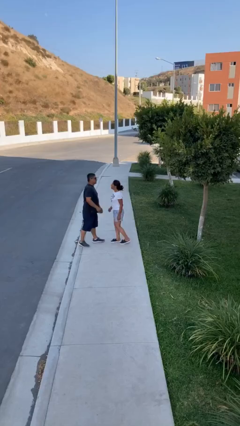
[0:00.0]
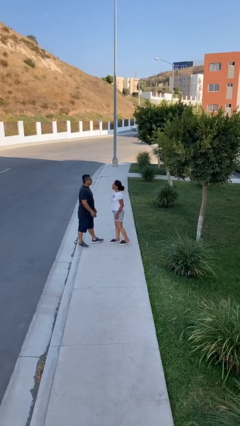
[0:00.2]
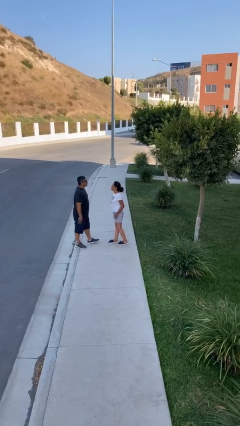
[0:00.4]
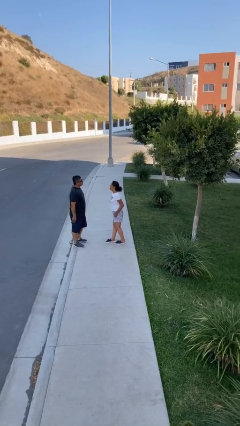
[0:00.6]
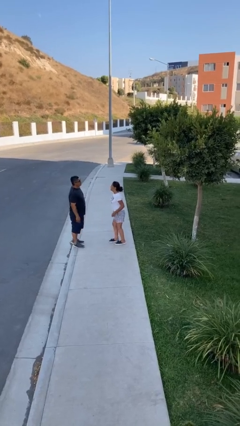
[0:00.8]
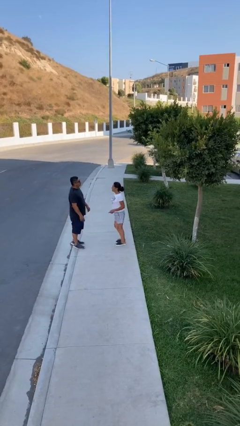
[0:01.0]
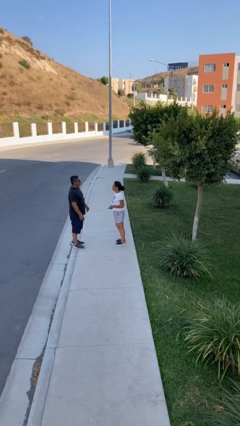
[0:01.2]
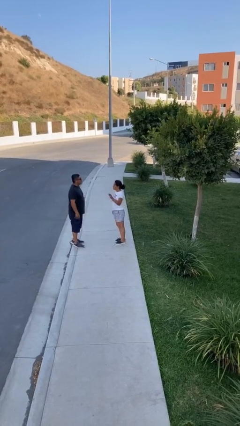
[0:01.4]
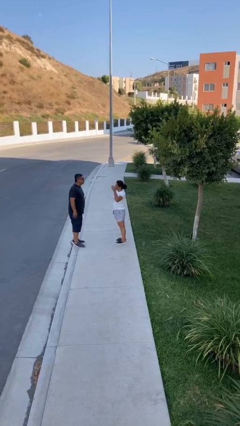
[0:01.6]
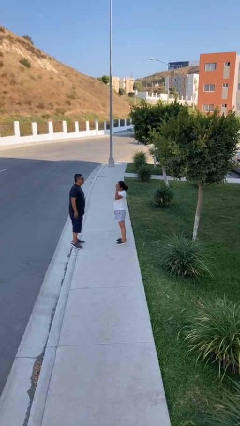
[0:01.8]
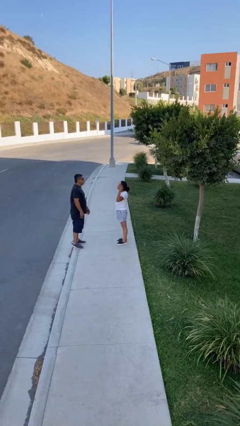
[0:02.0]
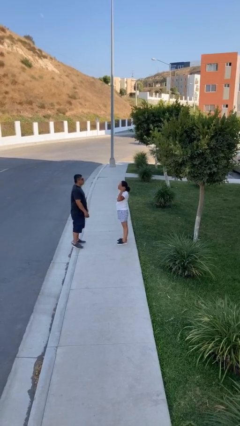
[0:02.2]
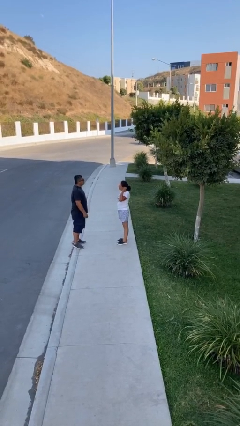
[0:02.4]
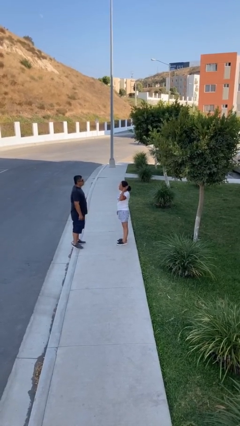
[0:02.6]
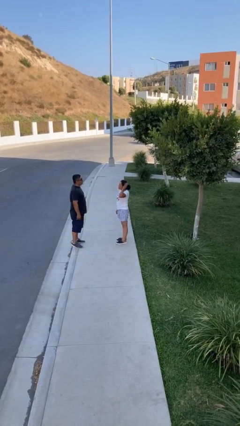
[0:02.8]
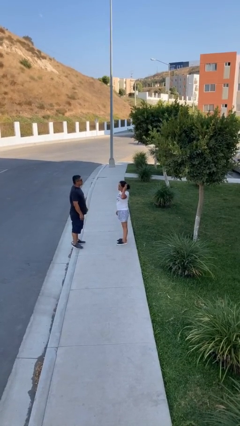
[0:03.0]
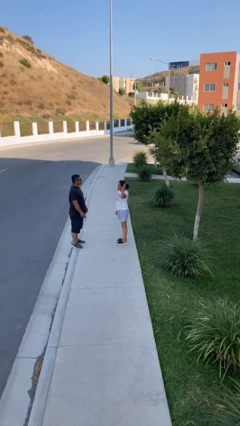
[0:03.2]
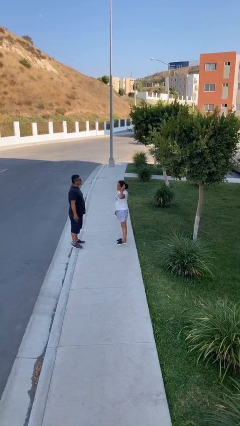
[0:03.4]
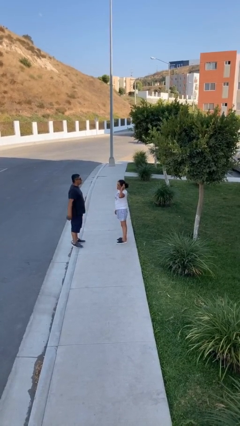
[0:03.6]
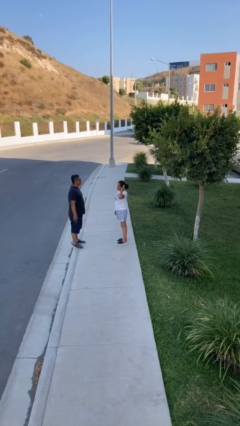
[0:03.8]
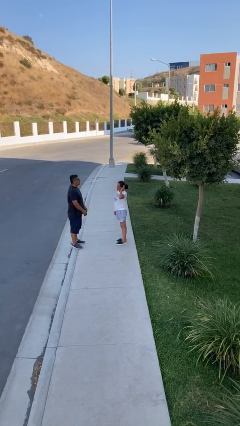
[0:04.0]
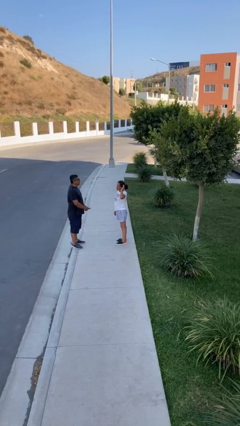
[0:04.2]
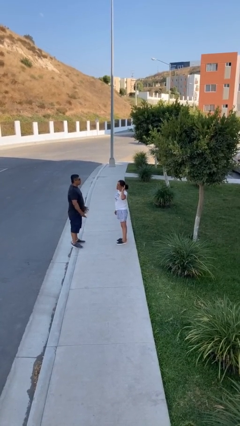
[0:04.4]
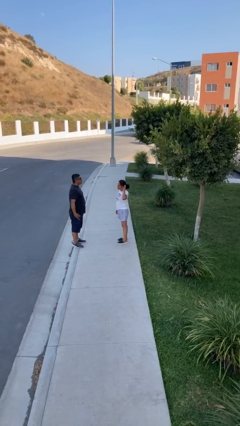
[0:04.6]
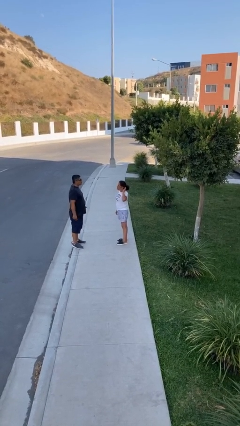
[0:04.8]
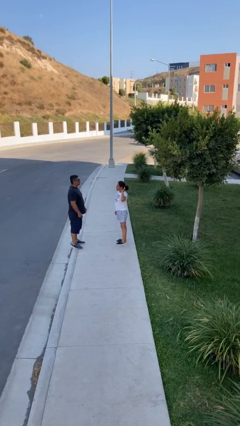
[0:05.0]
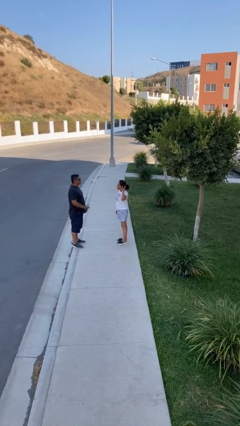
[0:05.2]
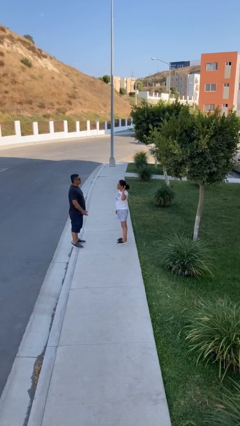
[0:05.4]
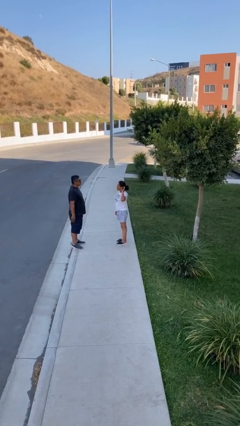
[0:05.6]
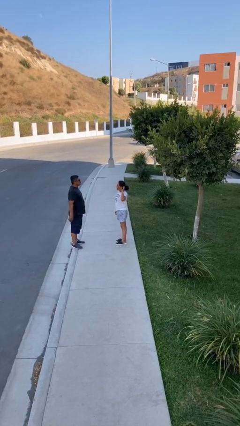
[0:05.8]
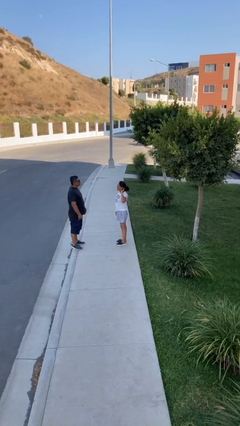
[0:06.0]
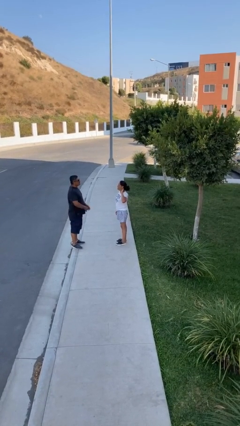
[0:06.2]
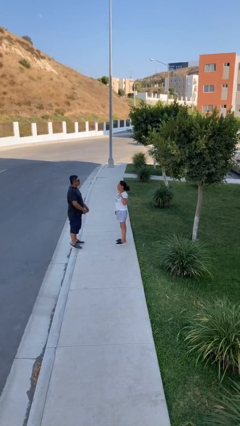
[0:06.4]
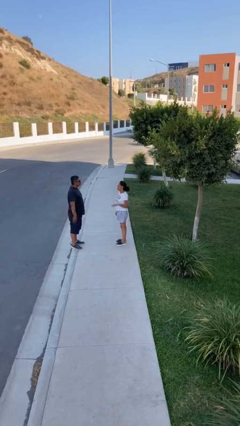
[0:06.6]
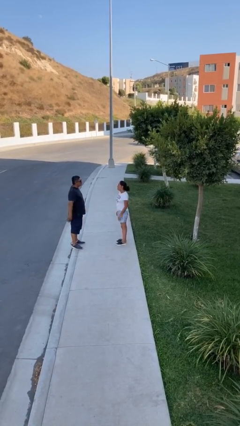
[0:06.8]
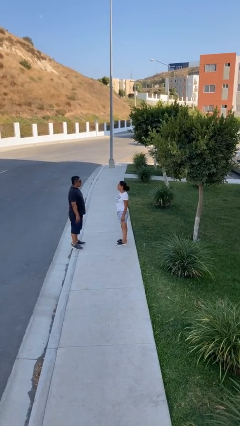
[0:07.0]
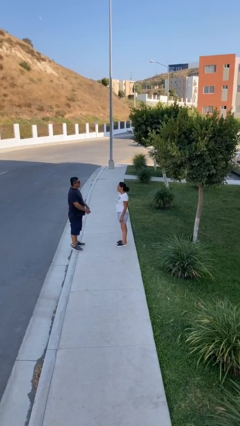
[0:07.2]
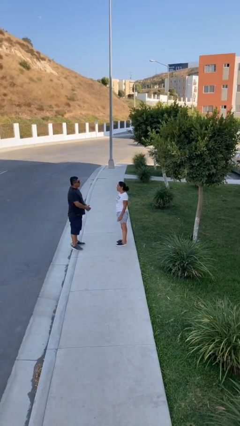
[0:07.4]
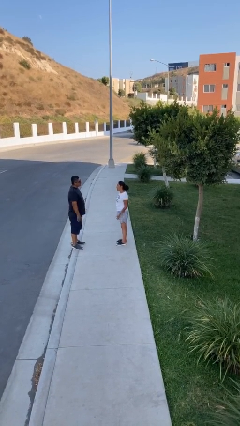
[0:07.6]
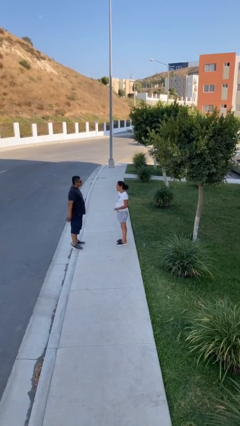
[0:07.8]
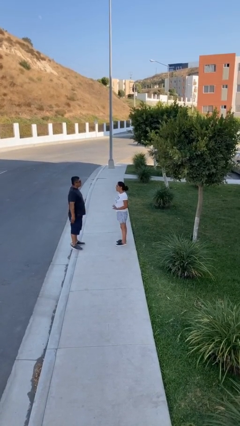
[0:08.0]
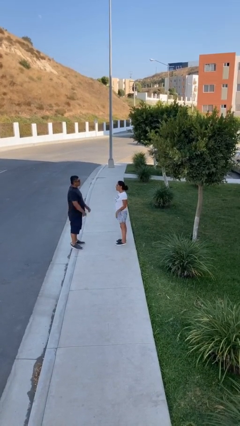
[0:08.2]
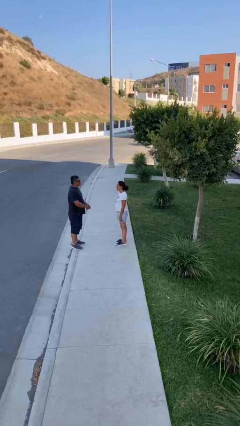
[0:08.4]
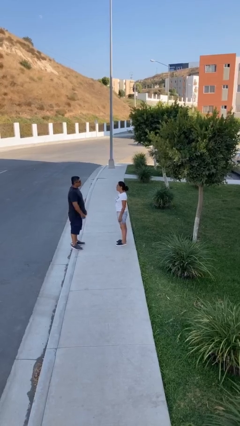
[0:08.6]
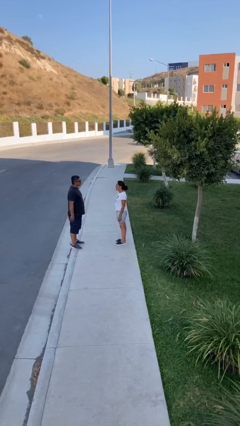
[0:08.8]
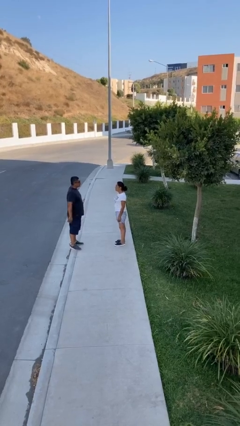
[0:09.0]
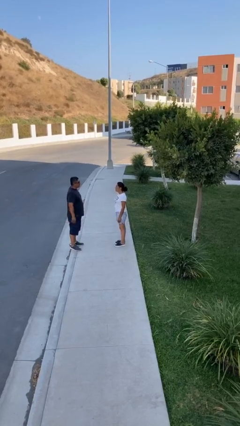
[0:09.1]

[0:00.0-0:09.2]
person talks to person

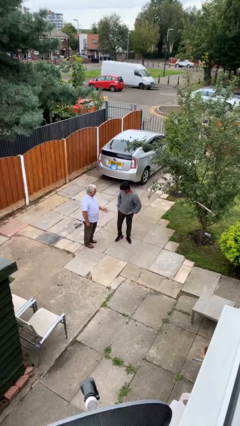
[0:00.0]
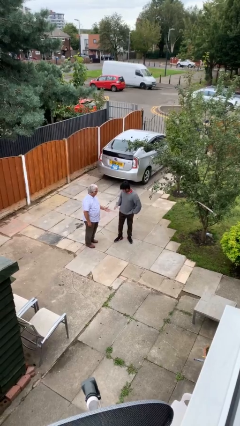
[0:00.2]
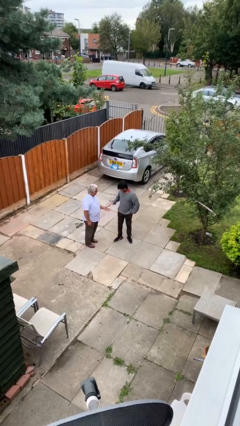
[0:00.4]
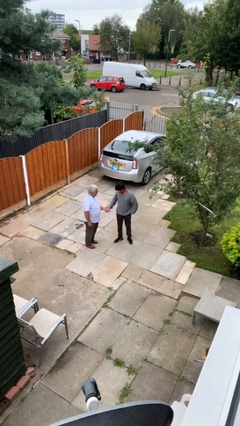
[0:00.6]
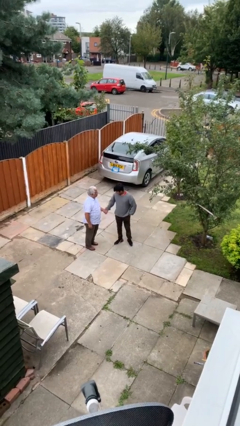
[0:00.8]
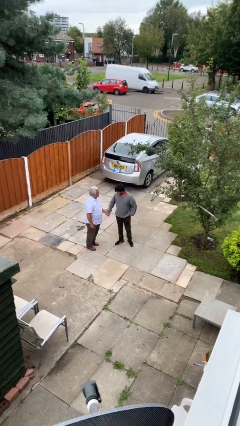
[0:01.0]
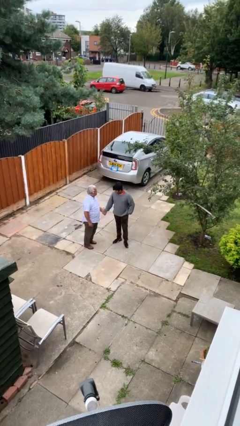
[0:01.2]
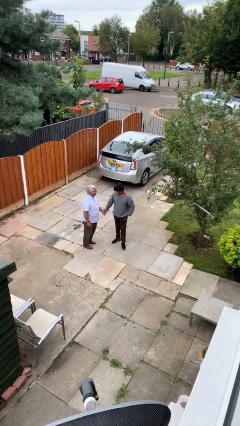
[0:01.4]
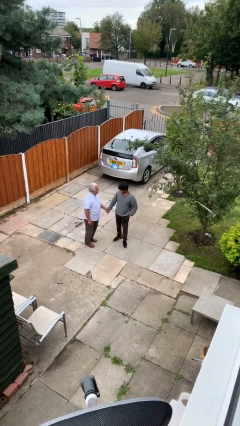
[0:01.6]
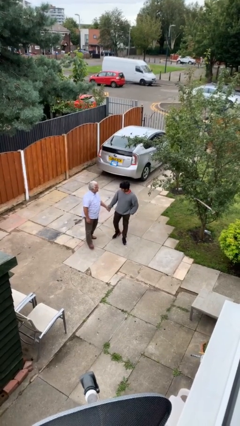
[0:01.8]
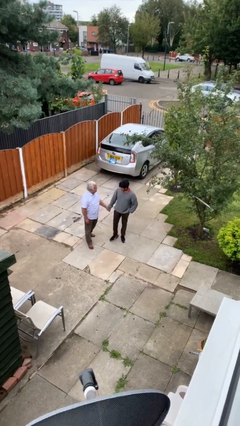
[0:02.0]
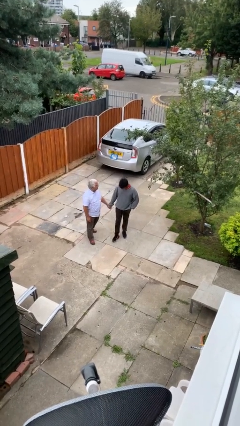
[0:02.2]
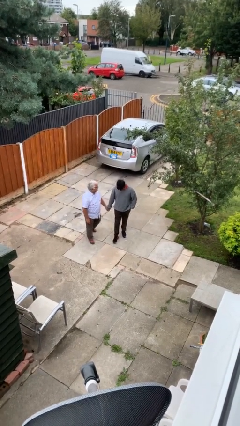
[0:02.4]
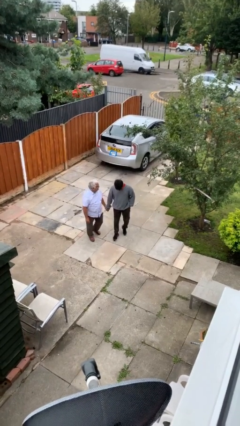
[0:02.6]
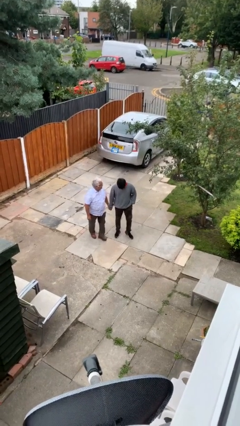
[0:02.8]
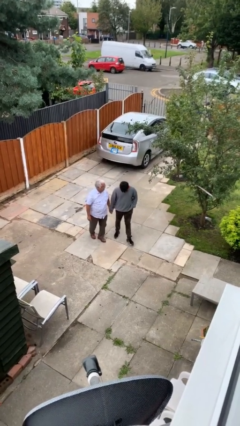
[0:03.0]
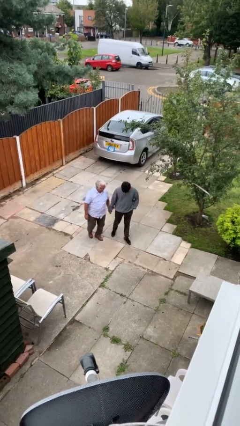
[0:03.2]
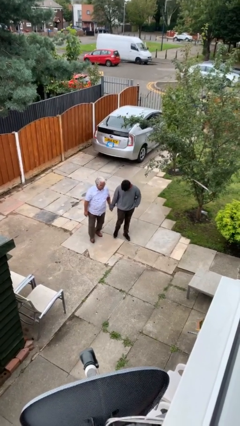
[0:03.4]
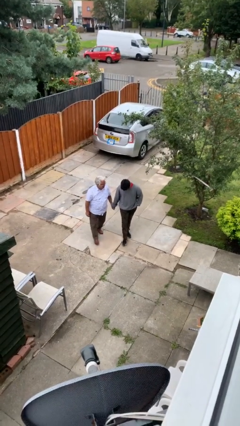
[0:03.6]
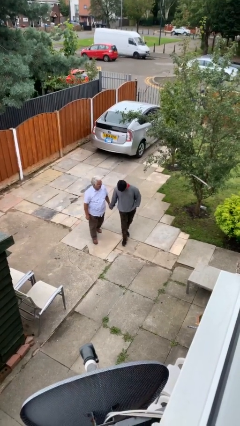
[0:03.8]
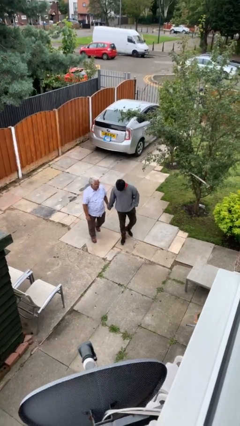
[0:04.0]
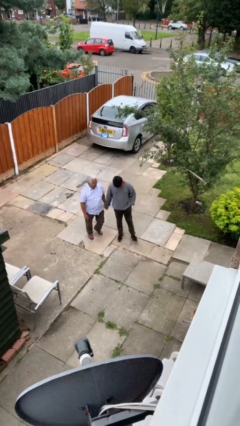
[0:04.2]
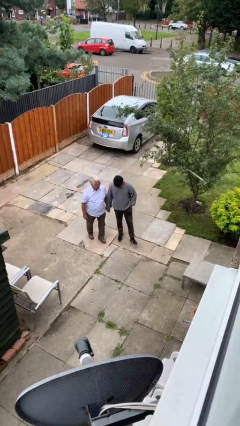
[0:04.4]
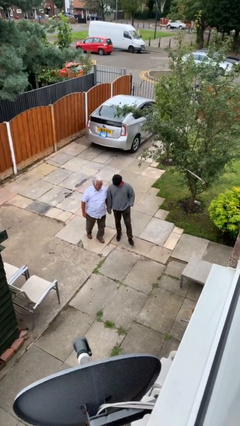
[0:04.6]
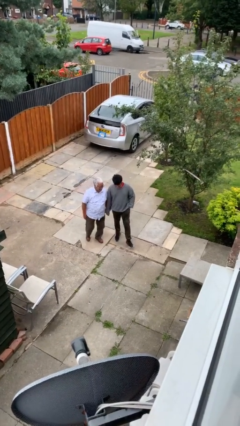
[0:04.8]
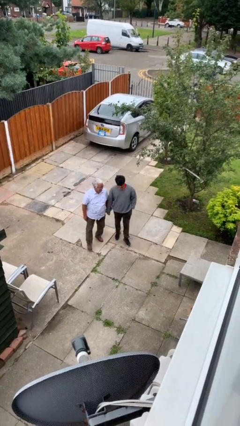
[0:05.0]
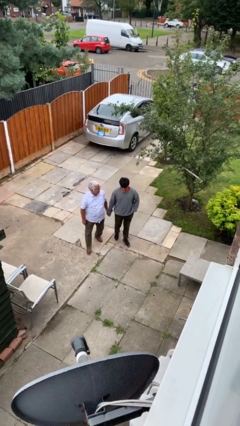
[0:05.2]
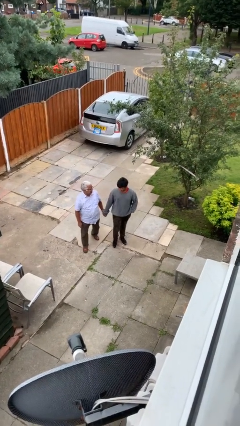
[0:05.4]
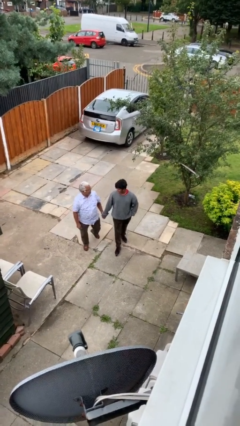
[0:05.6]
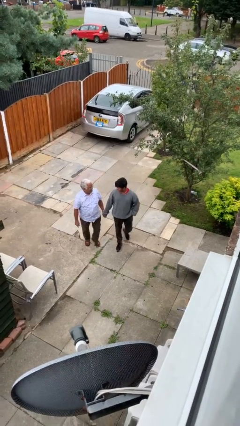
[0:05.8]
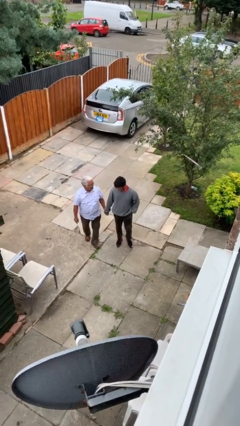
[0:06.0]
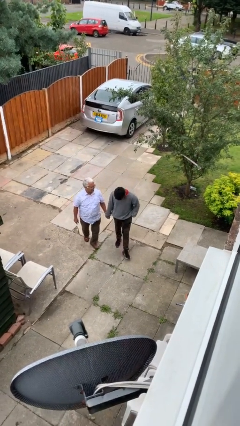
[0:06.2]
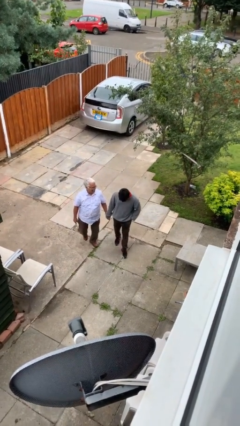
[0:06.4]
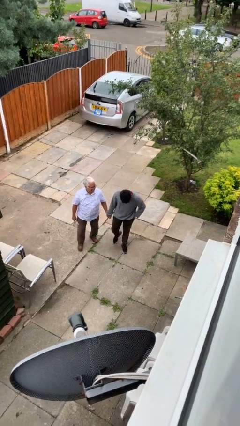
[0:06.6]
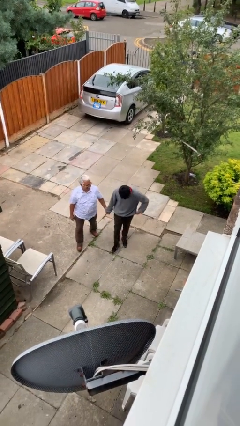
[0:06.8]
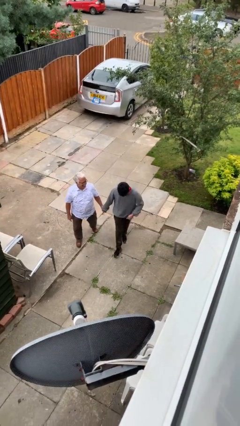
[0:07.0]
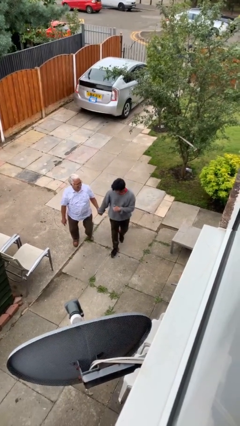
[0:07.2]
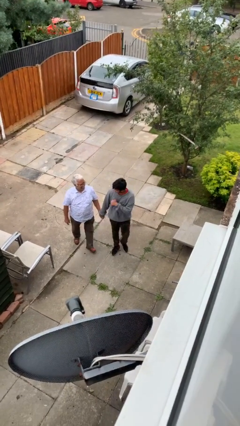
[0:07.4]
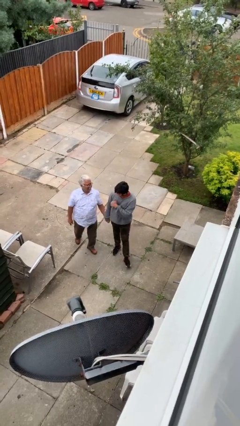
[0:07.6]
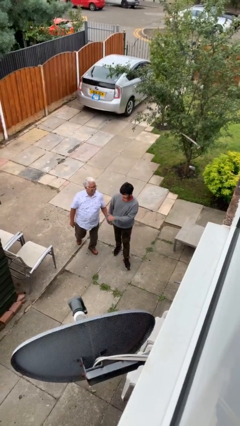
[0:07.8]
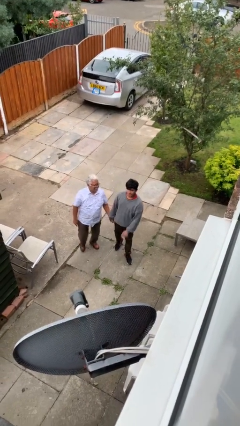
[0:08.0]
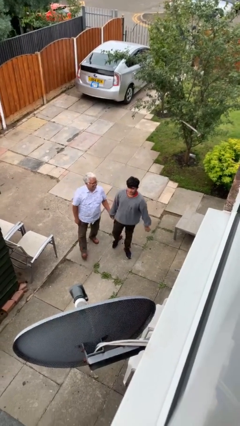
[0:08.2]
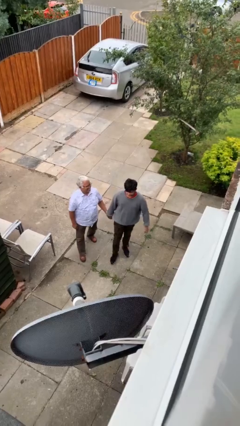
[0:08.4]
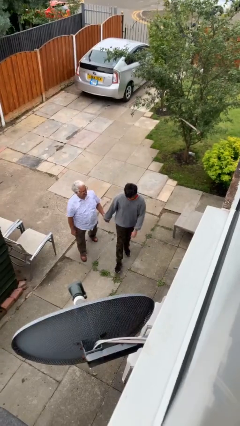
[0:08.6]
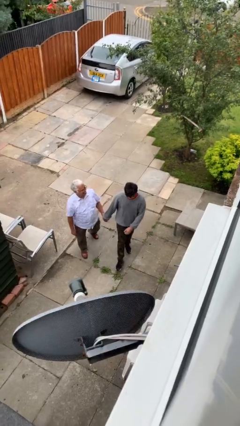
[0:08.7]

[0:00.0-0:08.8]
person holds hand

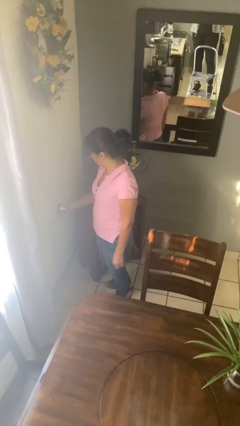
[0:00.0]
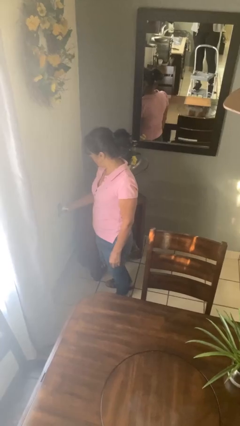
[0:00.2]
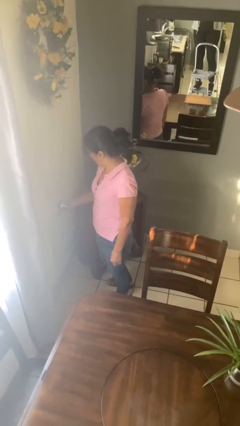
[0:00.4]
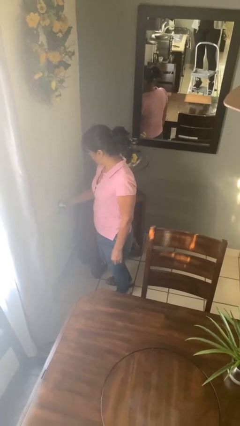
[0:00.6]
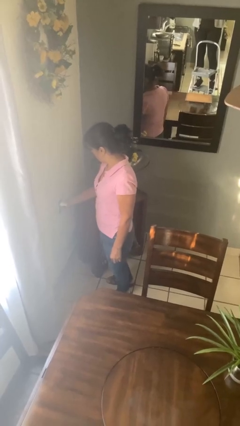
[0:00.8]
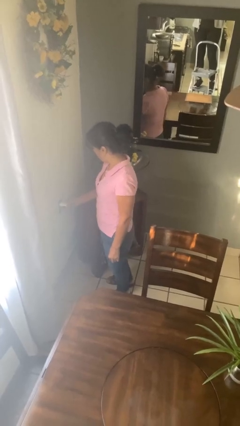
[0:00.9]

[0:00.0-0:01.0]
person plugs into electrical socket
